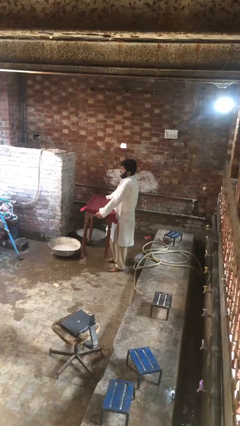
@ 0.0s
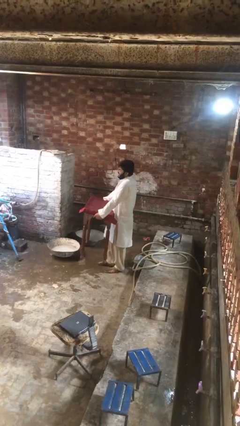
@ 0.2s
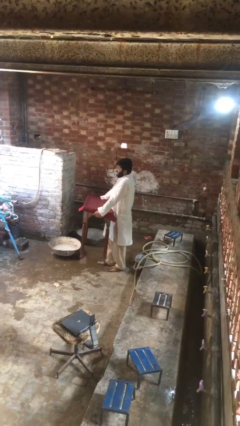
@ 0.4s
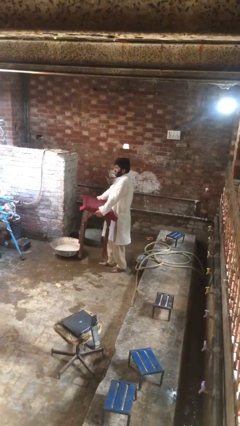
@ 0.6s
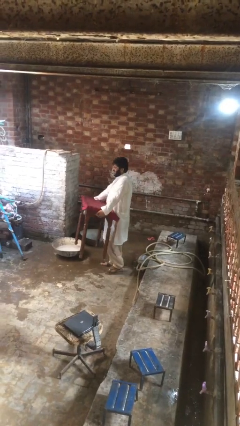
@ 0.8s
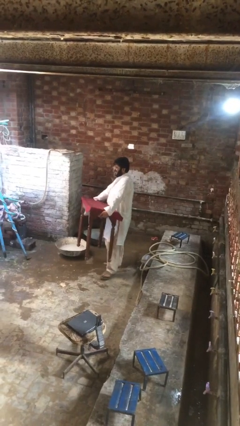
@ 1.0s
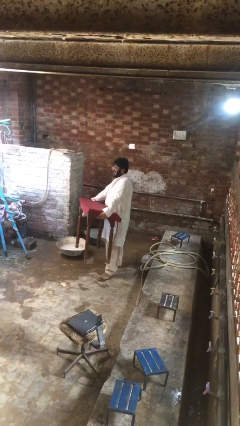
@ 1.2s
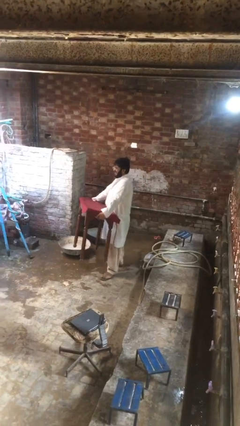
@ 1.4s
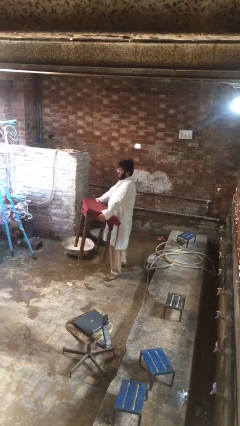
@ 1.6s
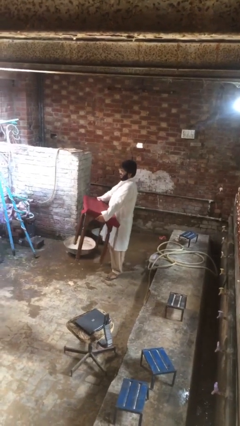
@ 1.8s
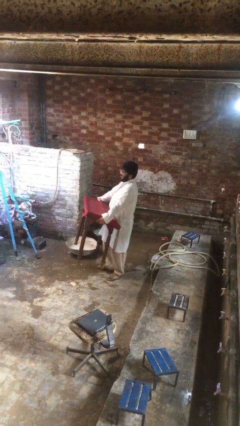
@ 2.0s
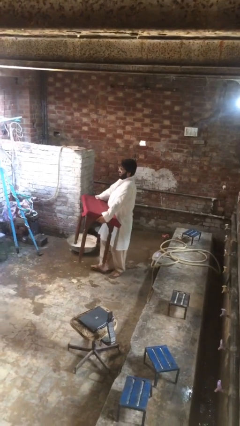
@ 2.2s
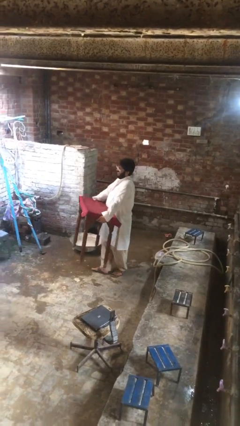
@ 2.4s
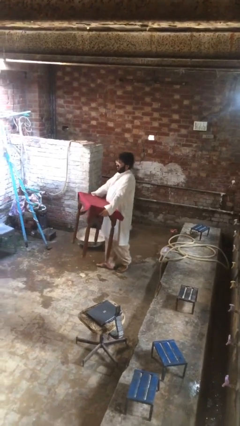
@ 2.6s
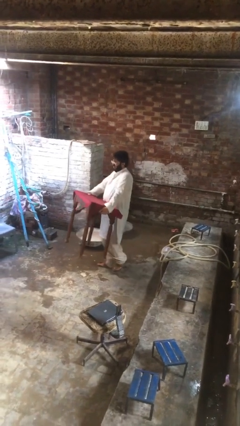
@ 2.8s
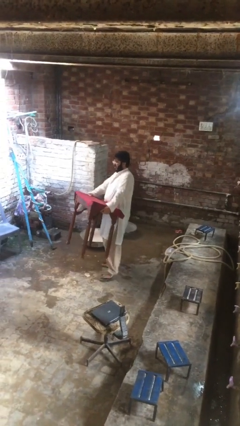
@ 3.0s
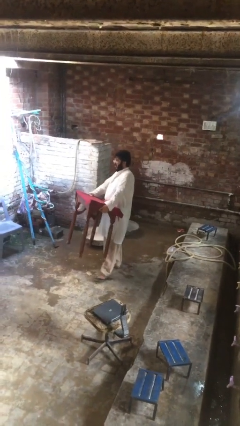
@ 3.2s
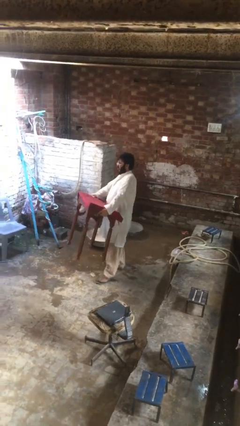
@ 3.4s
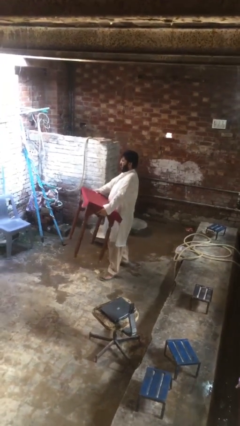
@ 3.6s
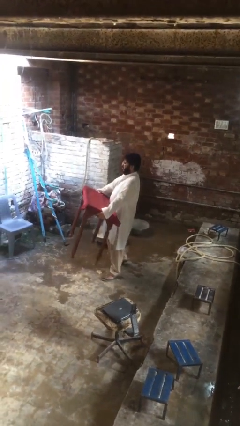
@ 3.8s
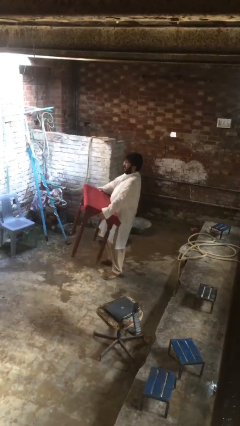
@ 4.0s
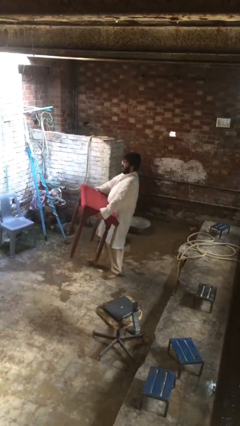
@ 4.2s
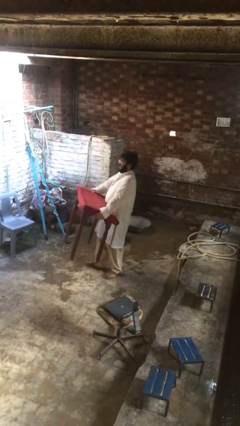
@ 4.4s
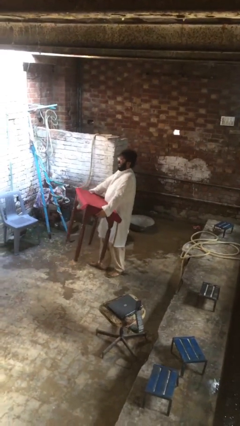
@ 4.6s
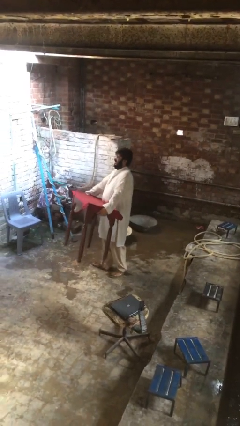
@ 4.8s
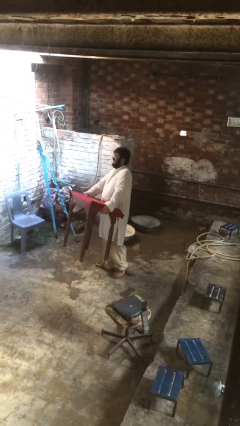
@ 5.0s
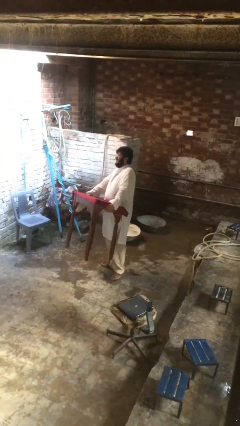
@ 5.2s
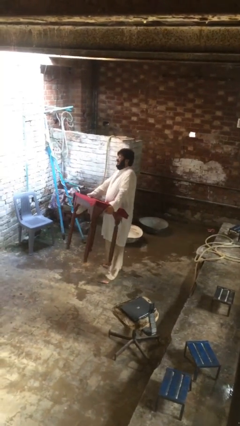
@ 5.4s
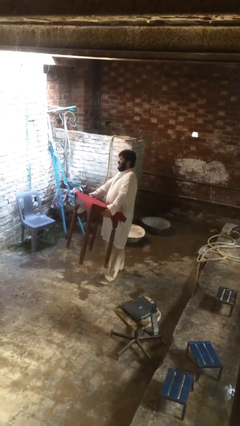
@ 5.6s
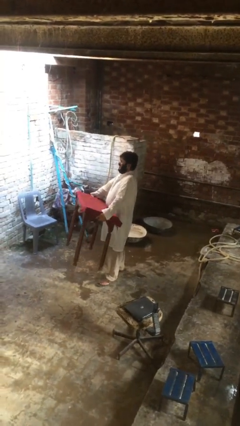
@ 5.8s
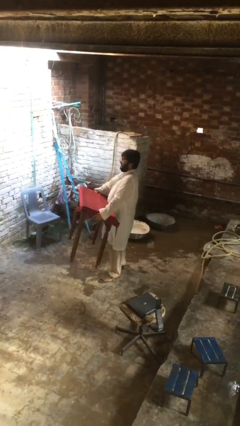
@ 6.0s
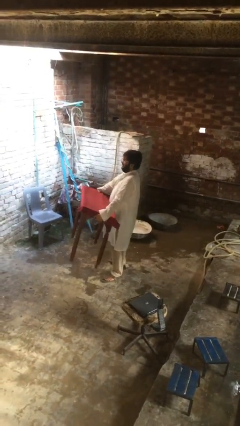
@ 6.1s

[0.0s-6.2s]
person carries heavy object

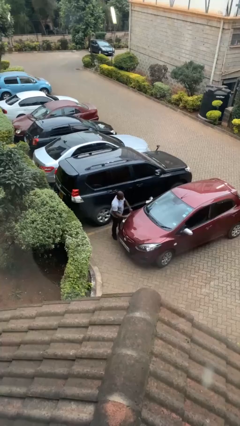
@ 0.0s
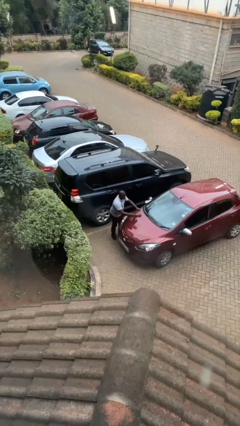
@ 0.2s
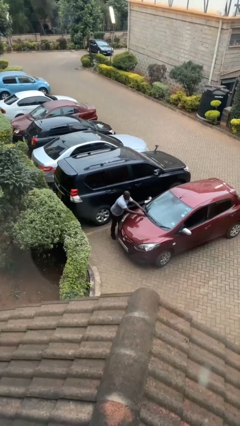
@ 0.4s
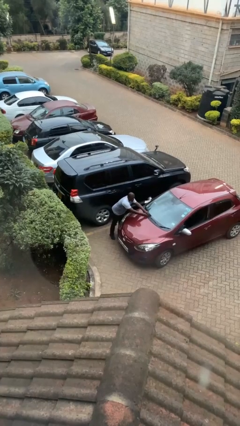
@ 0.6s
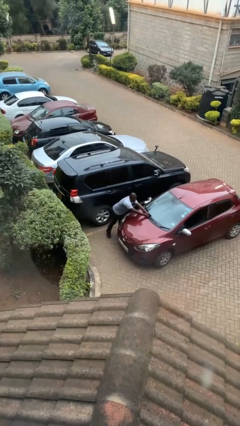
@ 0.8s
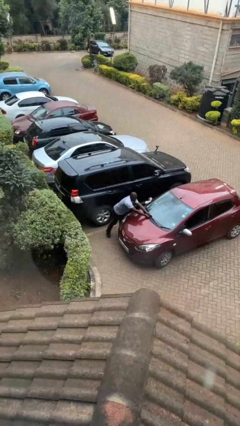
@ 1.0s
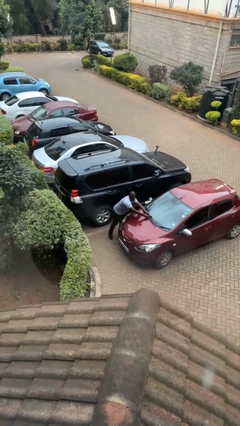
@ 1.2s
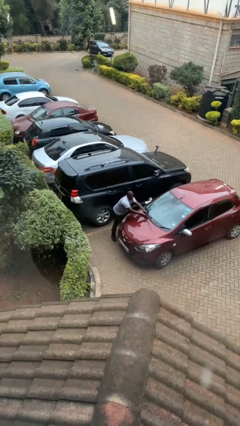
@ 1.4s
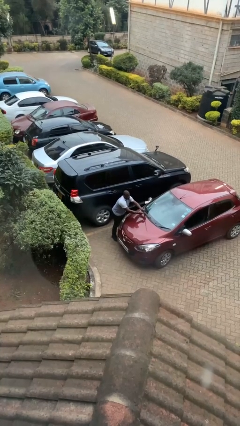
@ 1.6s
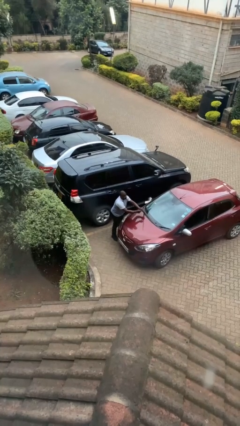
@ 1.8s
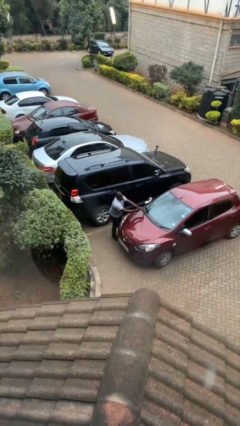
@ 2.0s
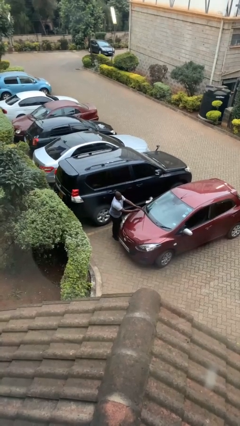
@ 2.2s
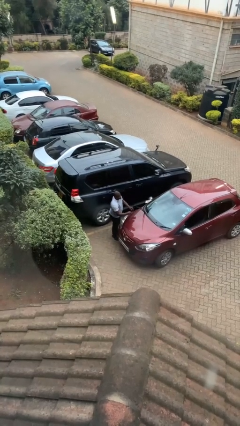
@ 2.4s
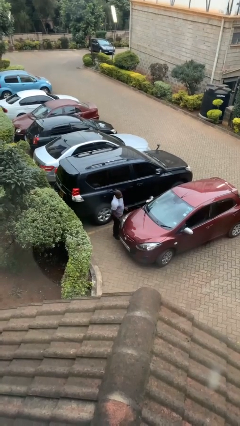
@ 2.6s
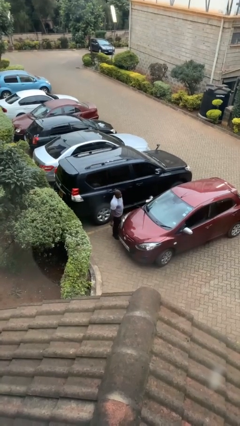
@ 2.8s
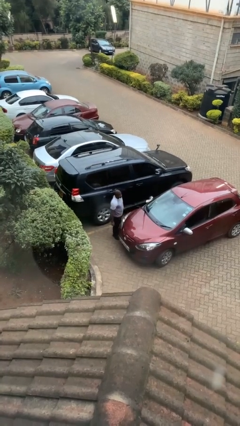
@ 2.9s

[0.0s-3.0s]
person flips up car wipers

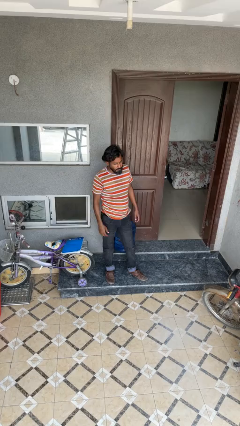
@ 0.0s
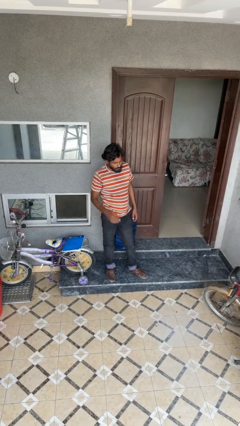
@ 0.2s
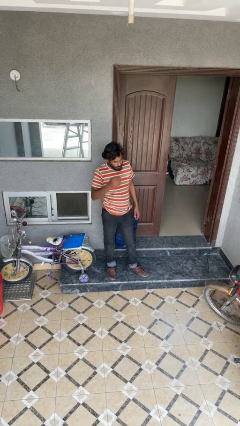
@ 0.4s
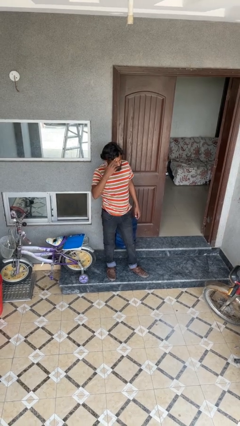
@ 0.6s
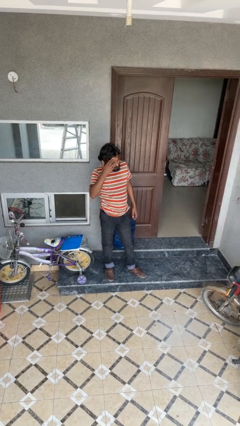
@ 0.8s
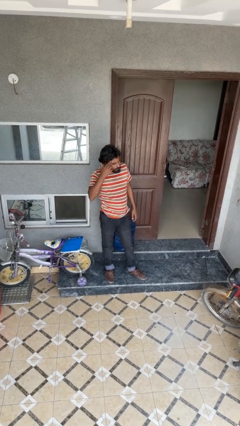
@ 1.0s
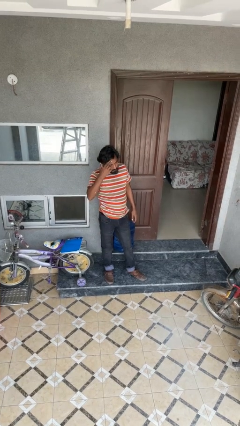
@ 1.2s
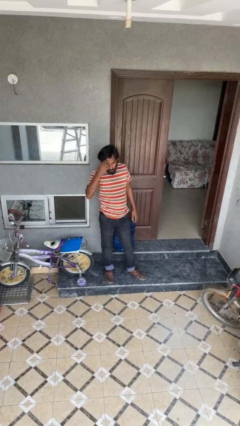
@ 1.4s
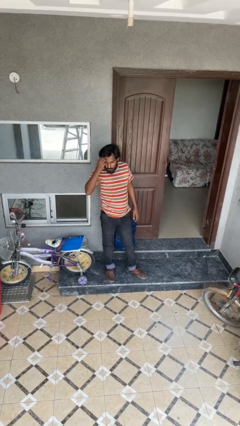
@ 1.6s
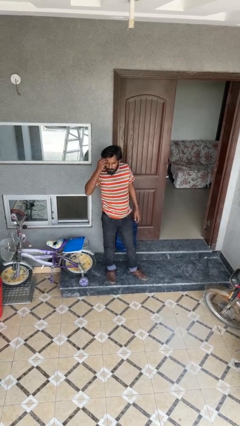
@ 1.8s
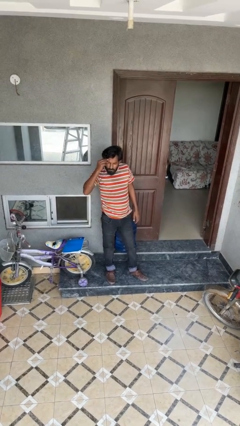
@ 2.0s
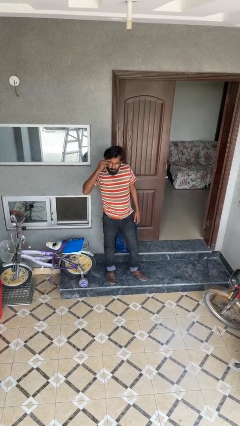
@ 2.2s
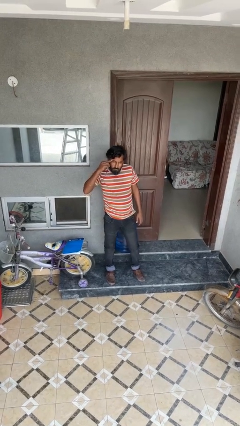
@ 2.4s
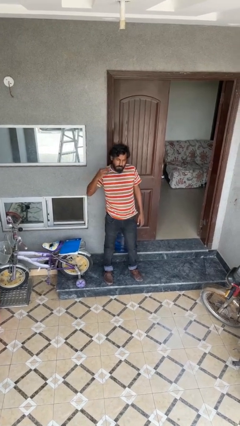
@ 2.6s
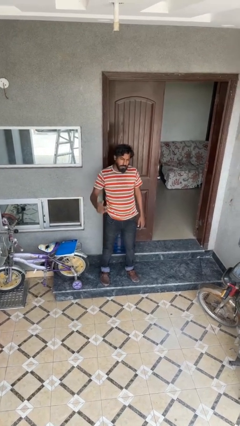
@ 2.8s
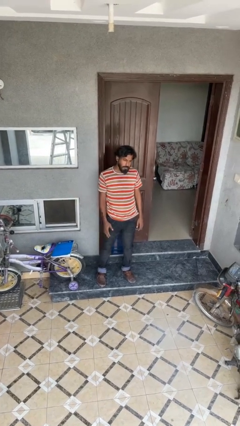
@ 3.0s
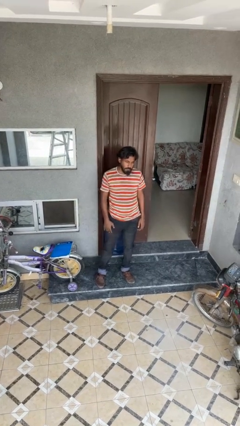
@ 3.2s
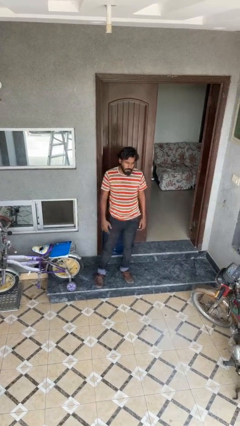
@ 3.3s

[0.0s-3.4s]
person scratches face

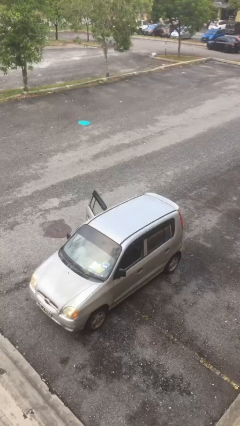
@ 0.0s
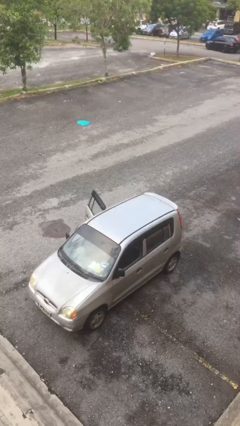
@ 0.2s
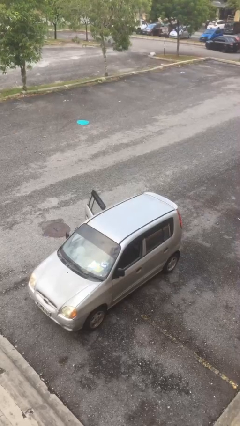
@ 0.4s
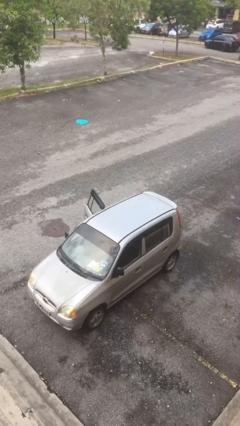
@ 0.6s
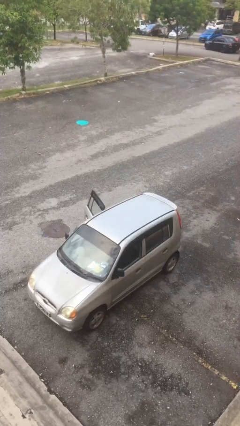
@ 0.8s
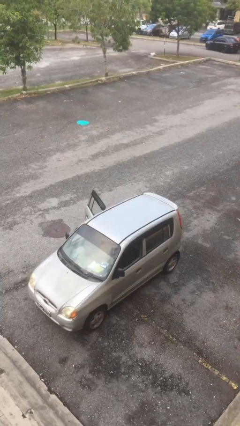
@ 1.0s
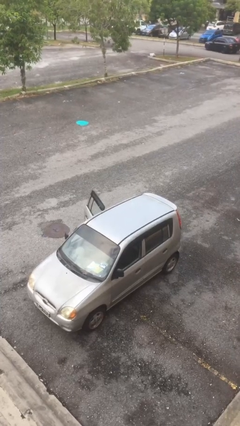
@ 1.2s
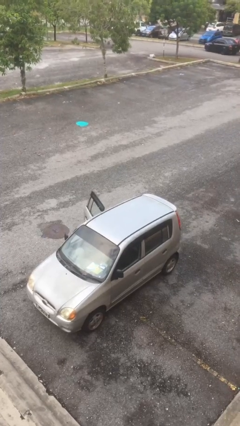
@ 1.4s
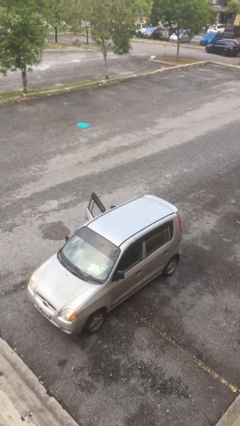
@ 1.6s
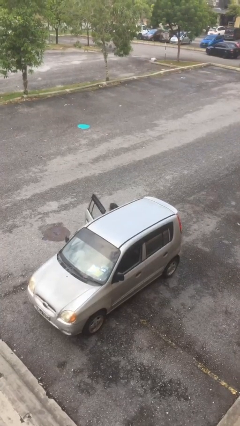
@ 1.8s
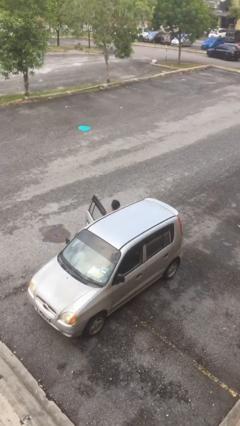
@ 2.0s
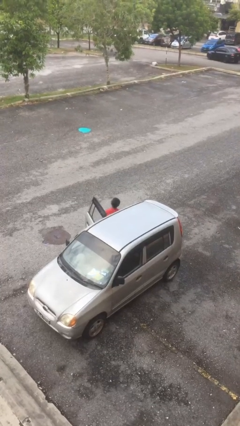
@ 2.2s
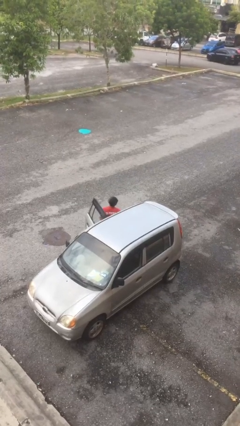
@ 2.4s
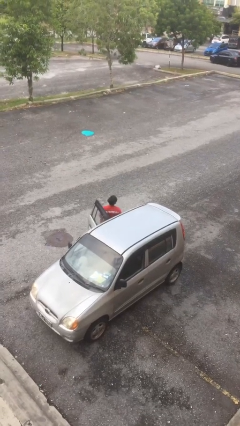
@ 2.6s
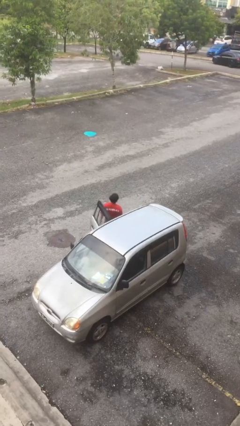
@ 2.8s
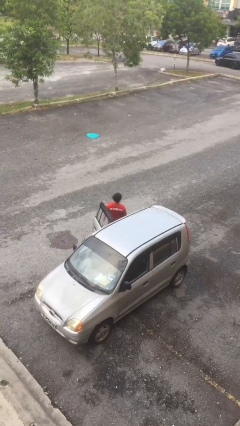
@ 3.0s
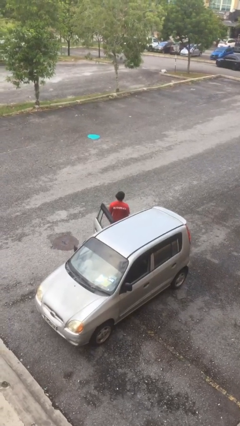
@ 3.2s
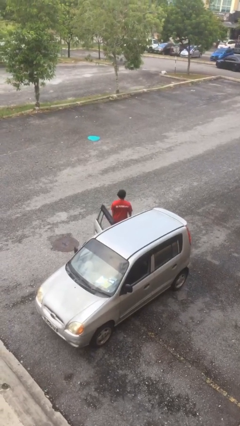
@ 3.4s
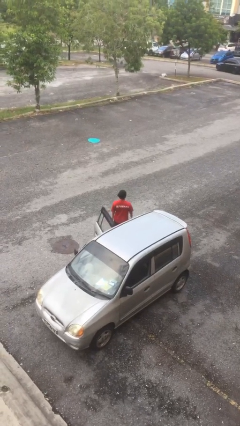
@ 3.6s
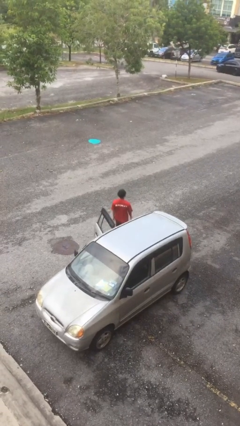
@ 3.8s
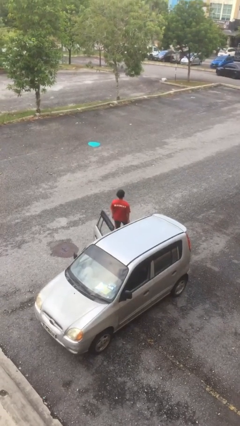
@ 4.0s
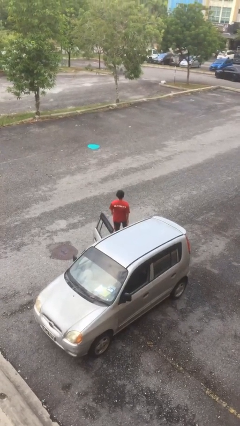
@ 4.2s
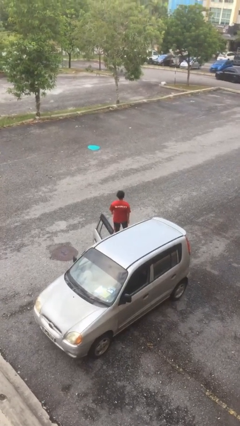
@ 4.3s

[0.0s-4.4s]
person exits car

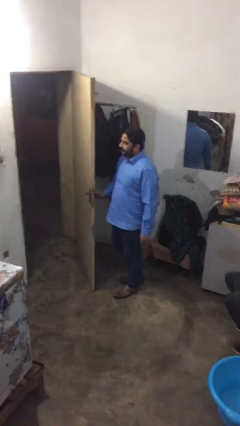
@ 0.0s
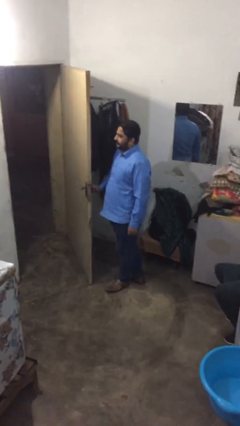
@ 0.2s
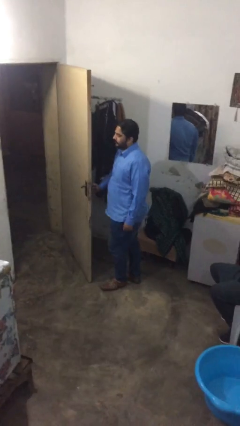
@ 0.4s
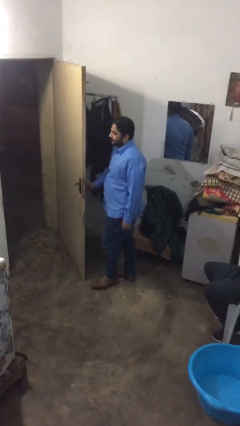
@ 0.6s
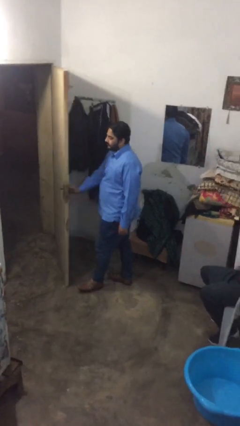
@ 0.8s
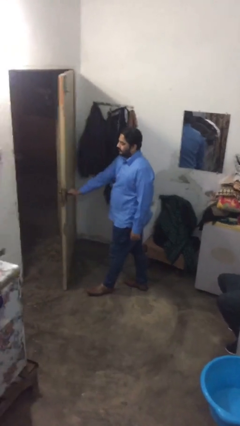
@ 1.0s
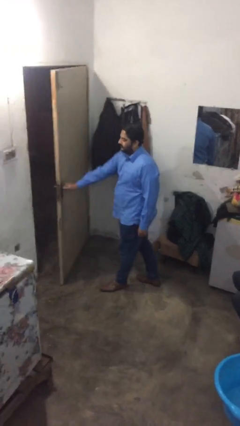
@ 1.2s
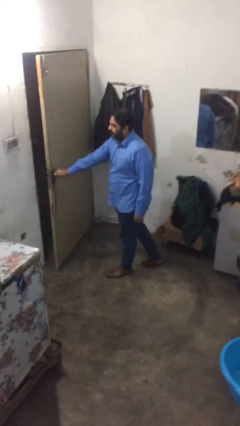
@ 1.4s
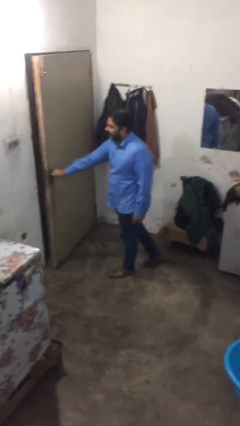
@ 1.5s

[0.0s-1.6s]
person closes facility door
